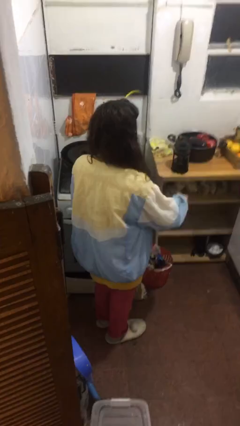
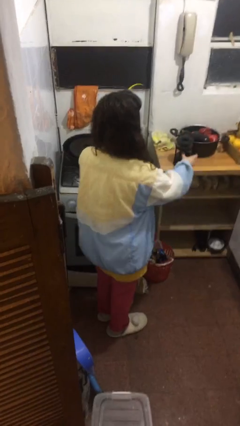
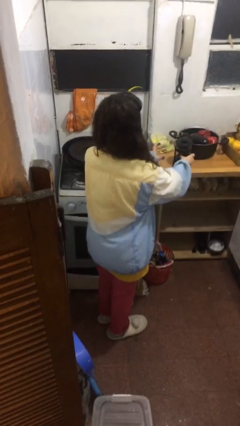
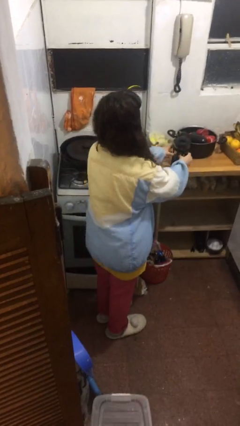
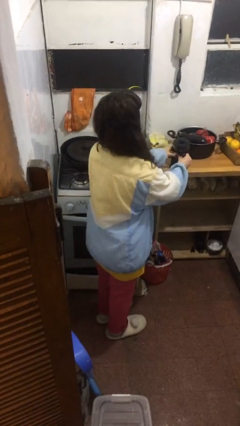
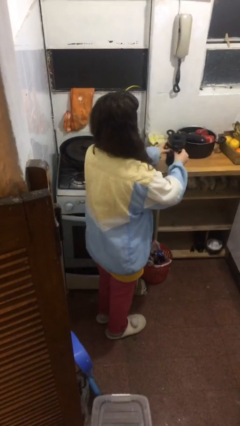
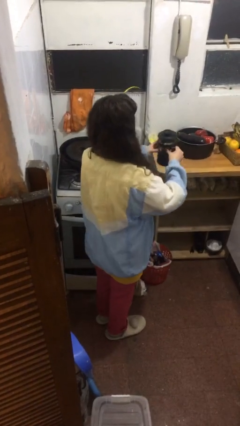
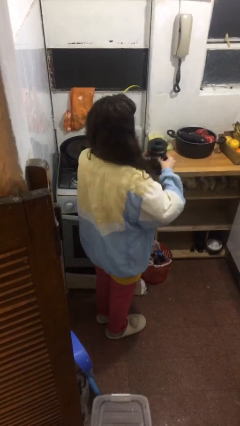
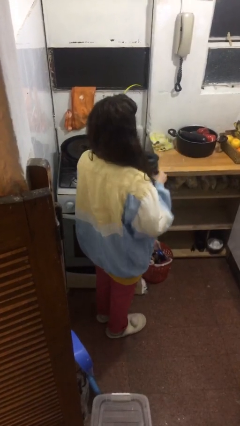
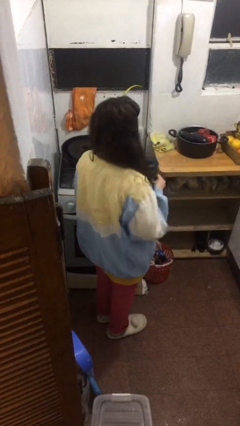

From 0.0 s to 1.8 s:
person picks up object from countertop

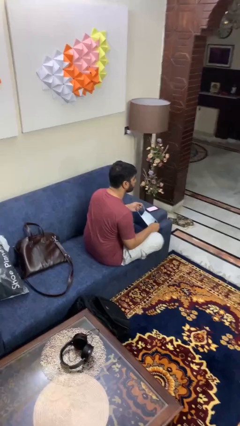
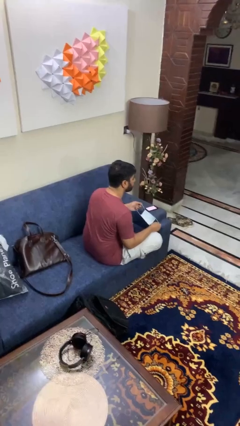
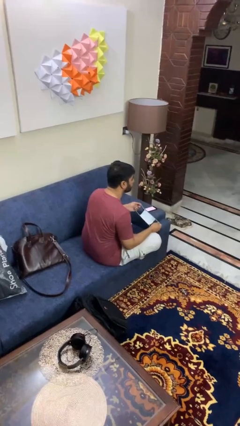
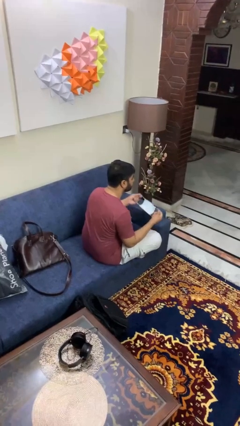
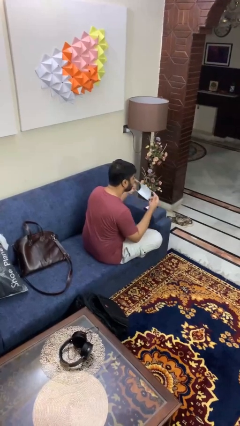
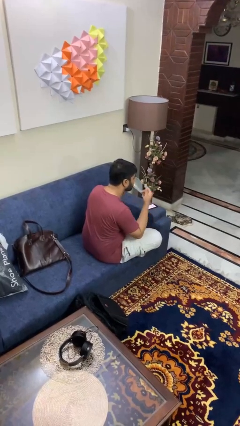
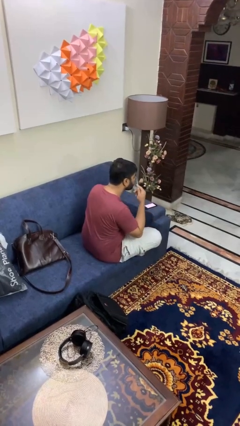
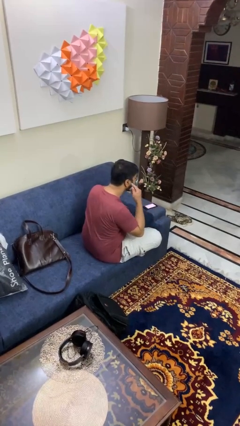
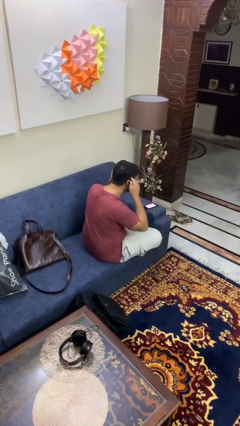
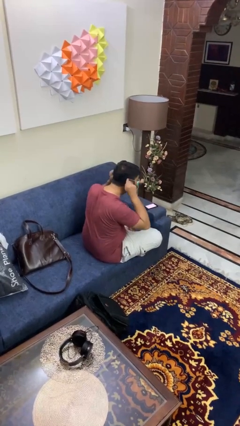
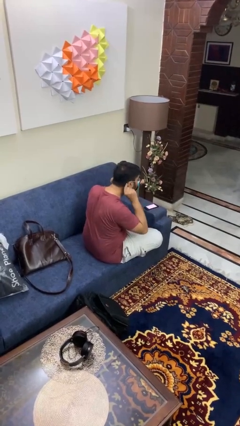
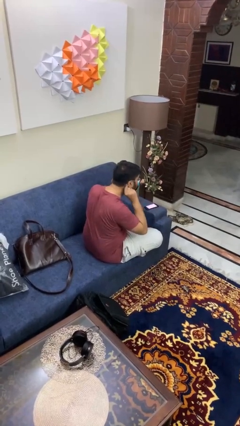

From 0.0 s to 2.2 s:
person puts on facemask

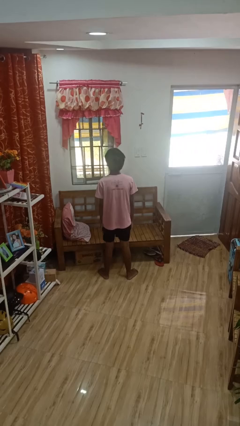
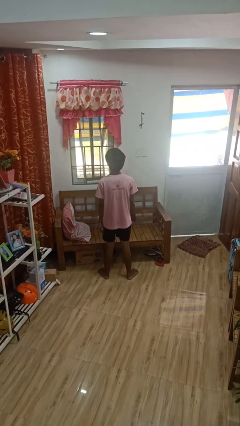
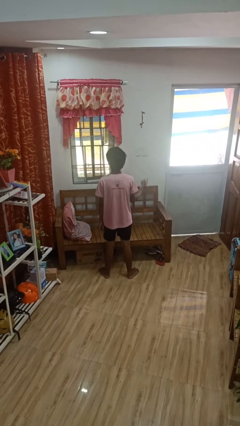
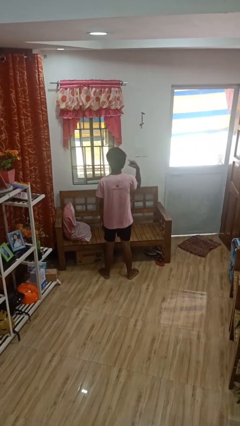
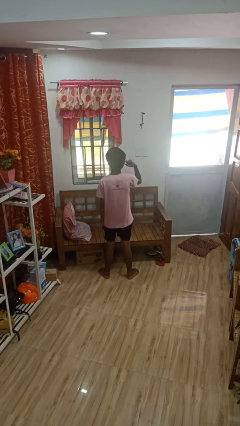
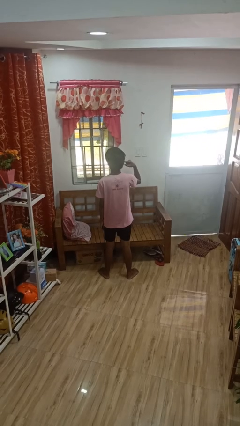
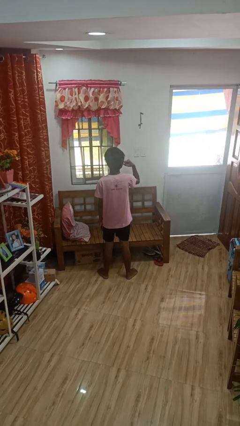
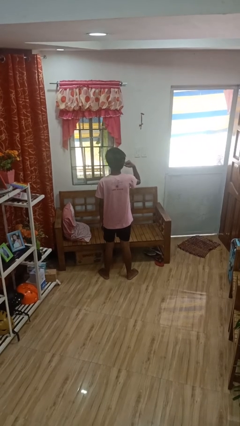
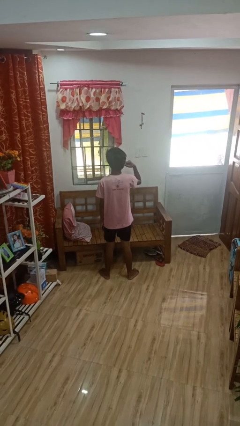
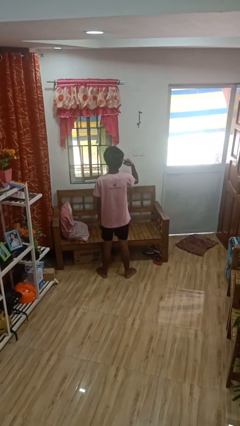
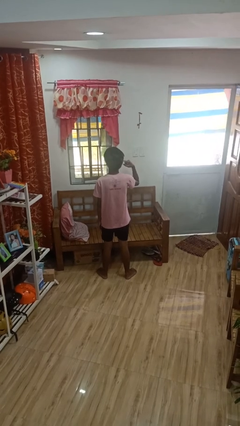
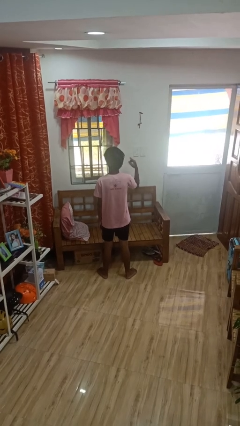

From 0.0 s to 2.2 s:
person gestures listen closely

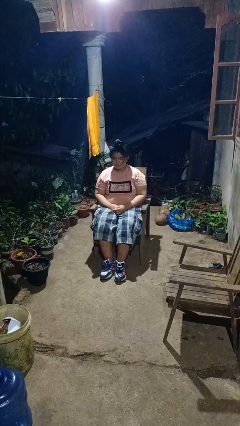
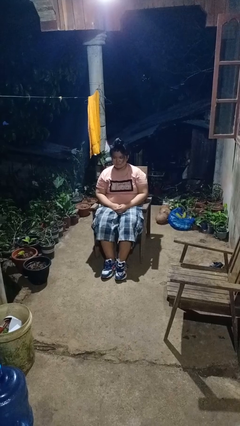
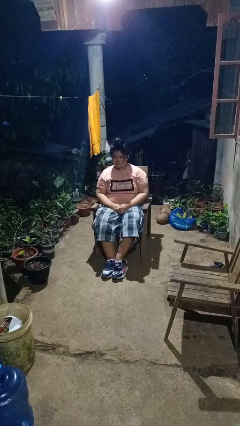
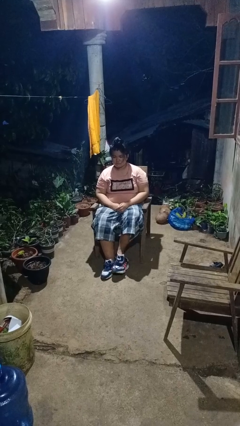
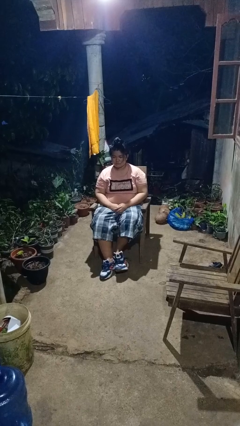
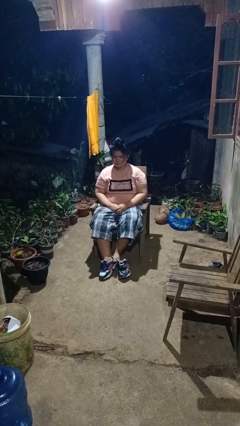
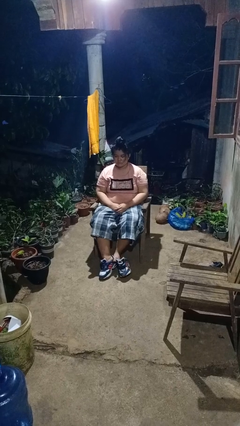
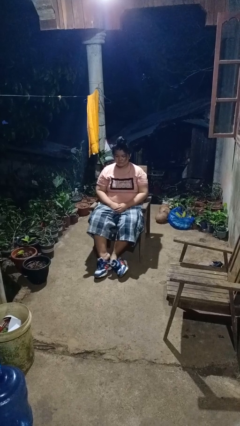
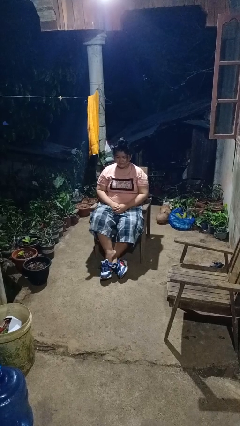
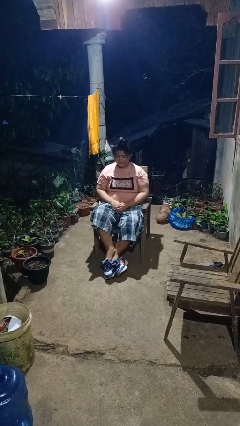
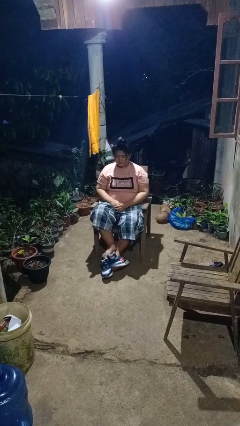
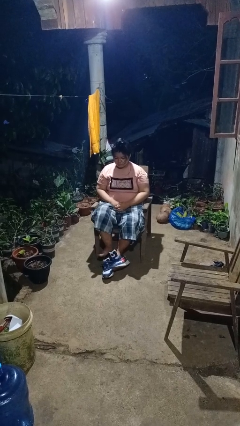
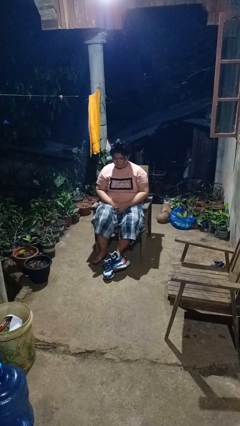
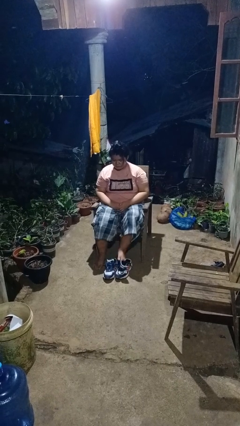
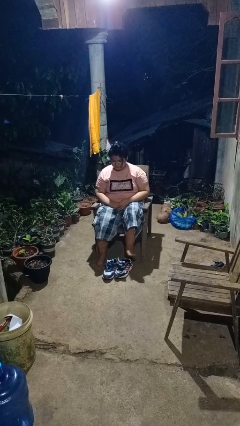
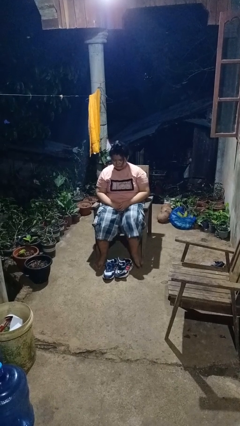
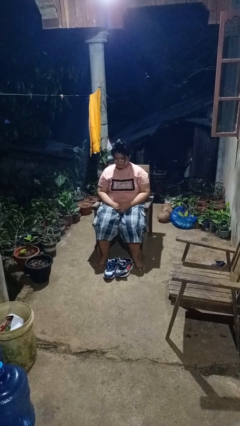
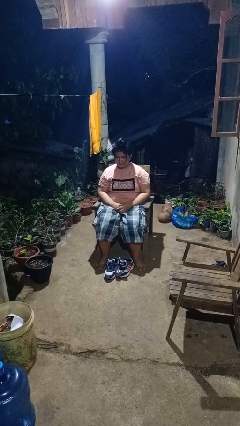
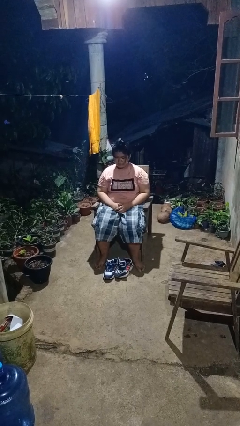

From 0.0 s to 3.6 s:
person takes off shoes

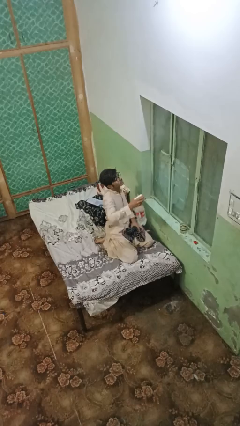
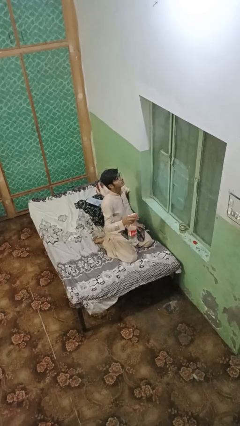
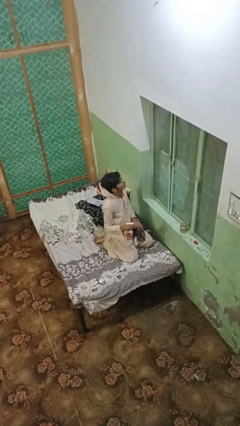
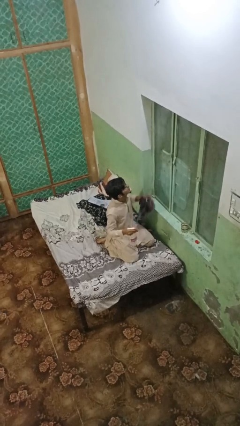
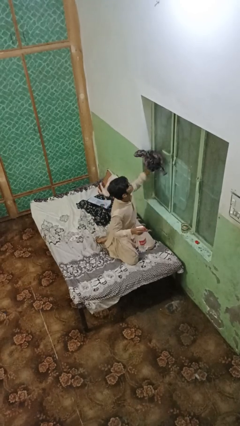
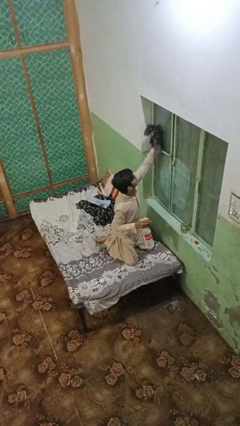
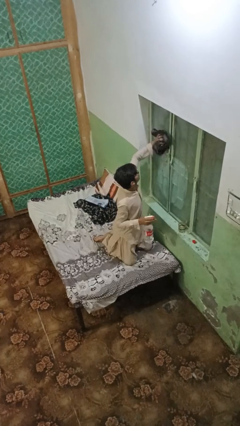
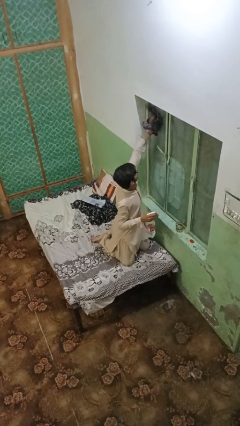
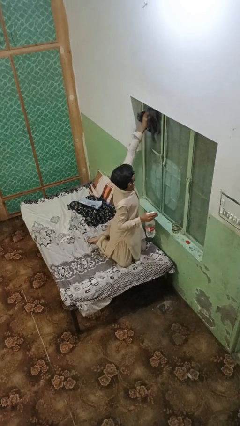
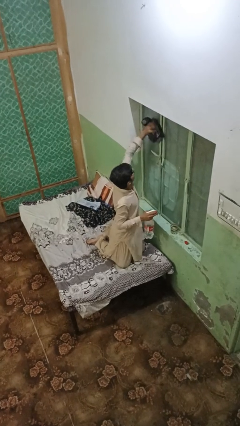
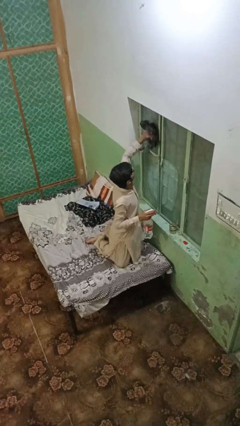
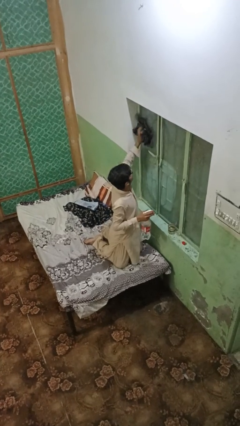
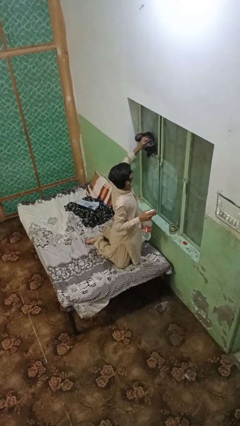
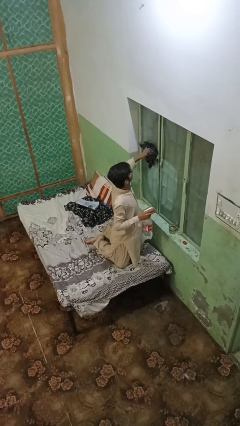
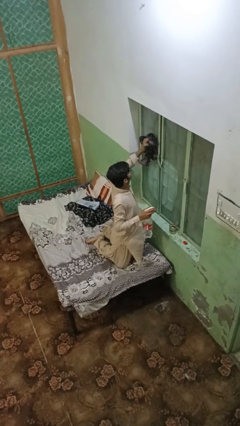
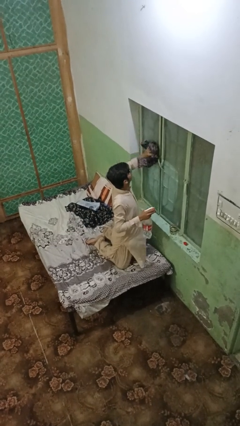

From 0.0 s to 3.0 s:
person washes window

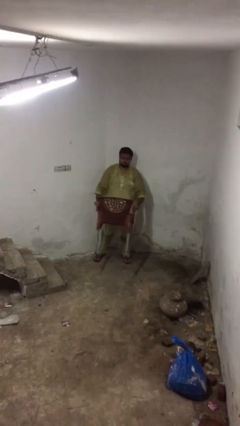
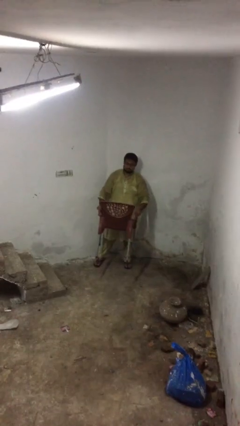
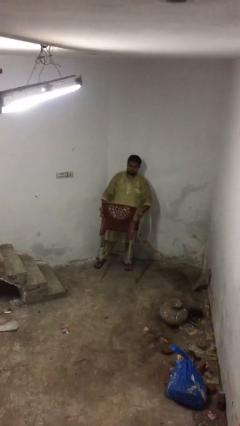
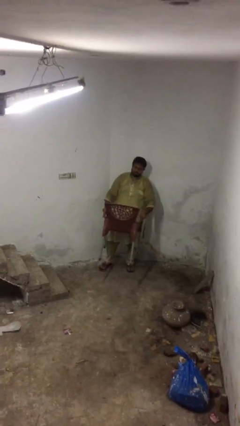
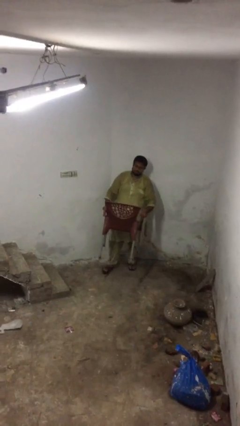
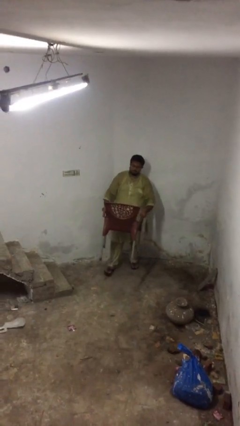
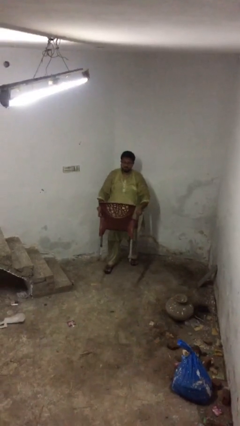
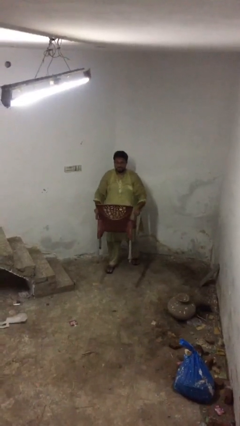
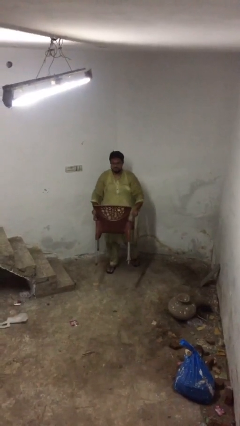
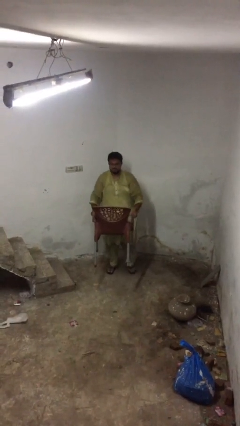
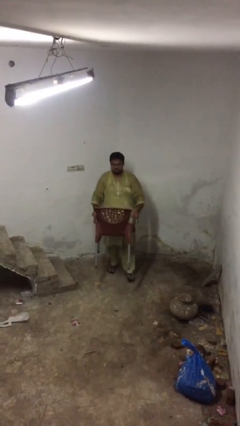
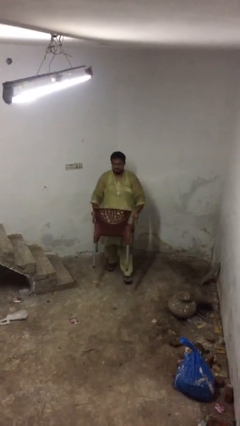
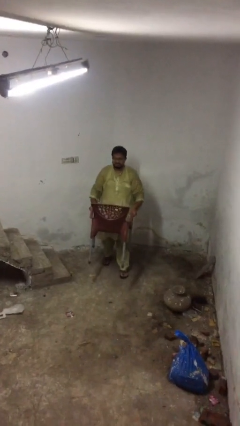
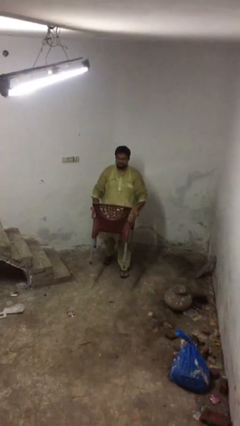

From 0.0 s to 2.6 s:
person carries heavy object

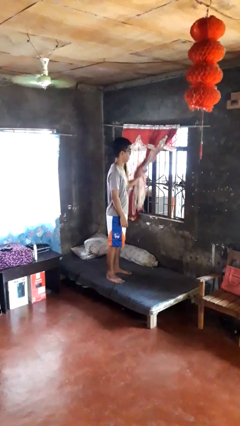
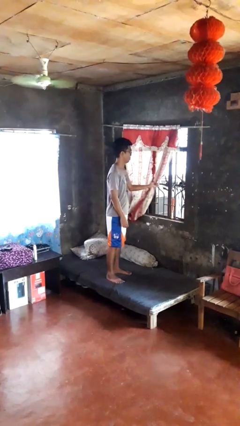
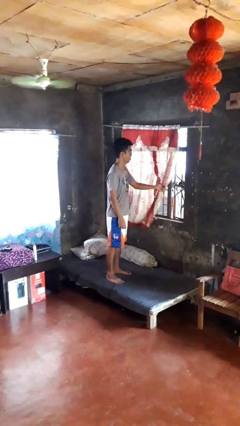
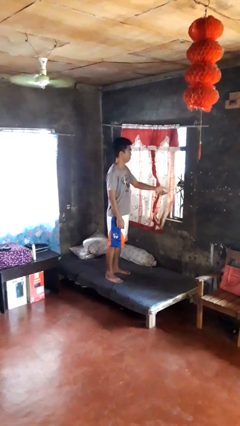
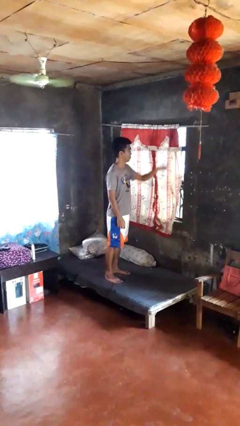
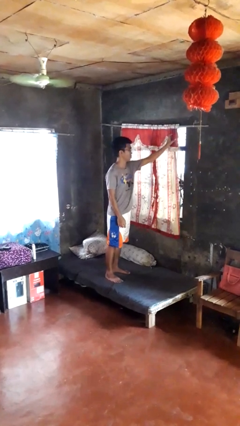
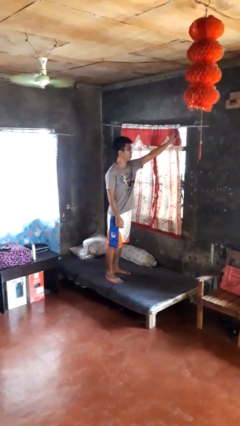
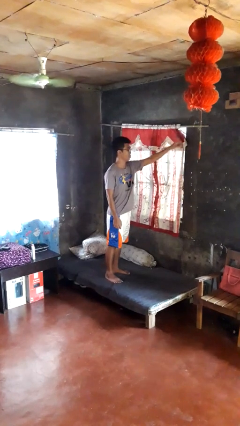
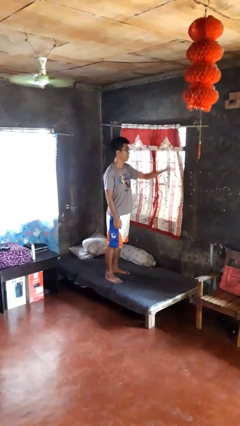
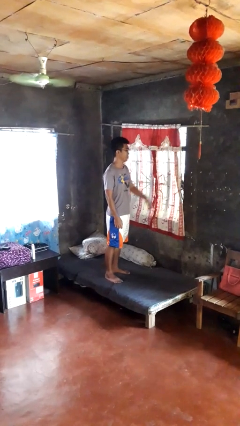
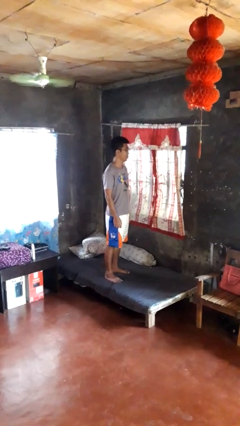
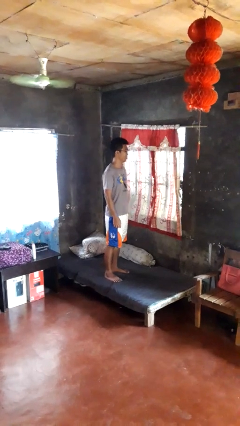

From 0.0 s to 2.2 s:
person closes curtains
